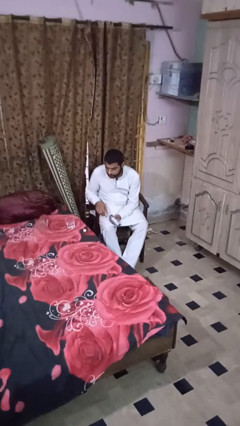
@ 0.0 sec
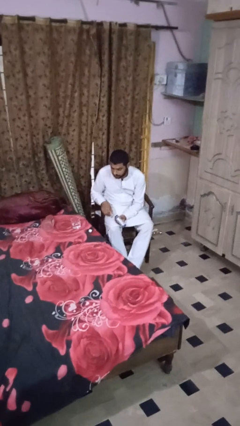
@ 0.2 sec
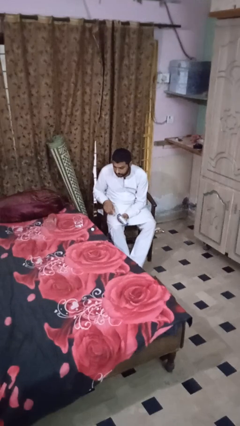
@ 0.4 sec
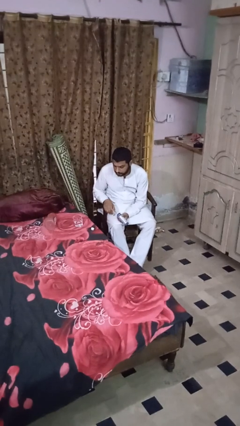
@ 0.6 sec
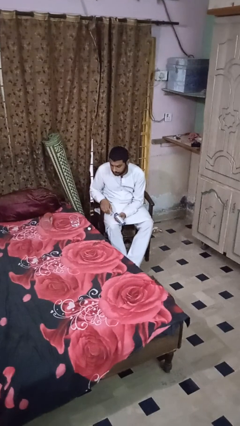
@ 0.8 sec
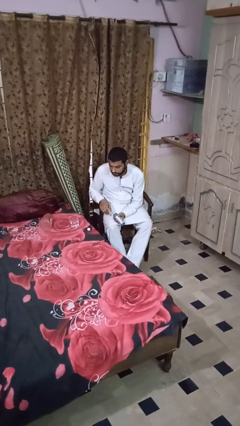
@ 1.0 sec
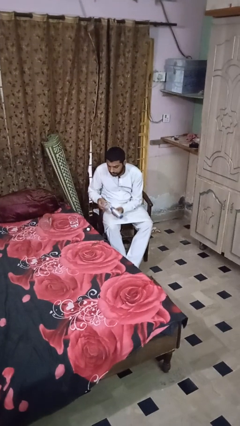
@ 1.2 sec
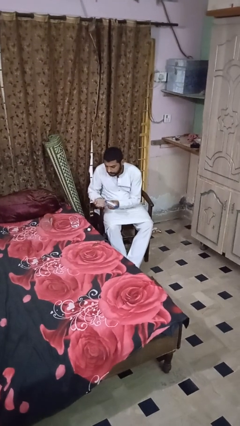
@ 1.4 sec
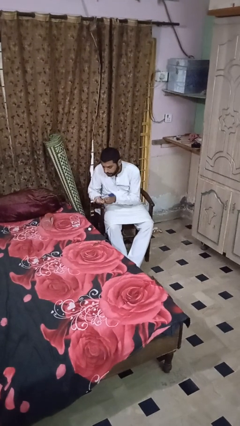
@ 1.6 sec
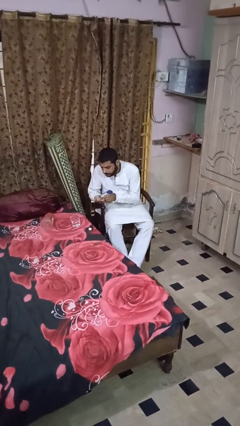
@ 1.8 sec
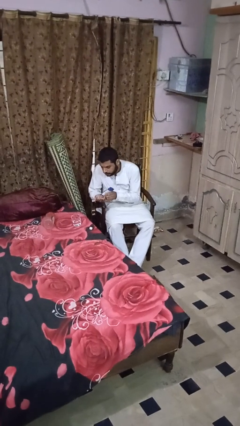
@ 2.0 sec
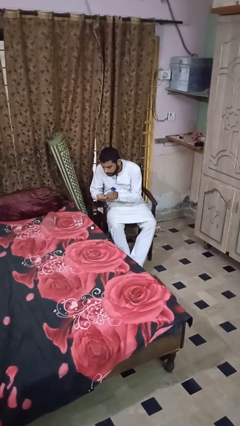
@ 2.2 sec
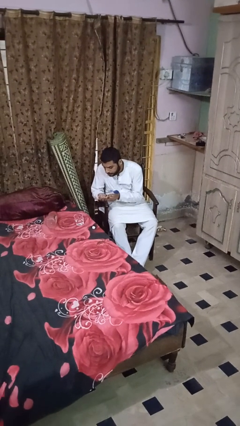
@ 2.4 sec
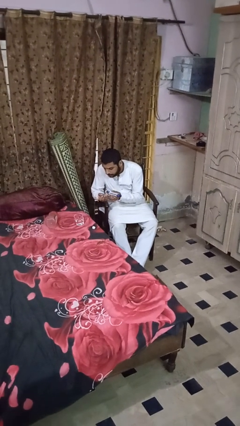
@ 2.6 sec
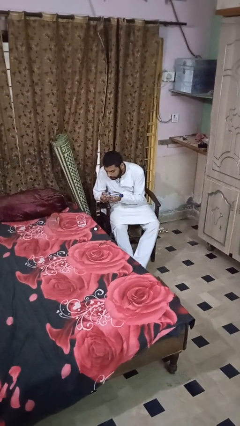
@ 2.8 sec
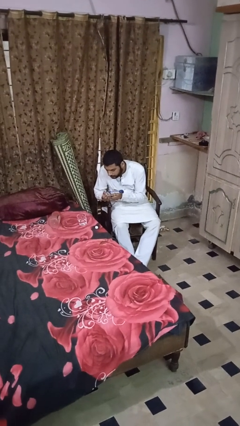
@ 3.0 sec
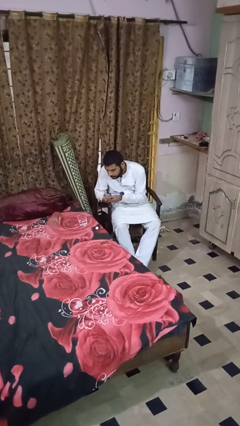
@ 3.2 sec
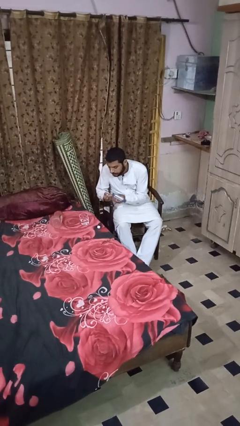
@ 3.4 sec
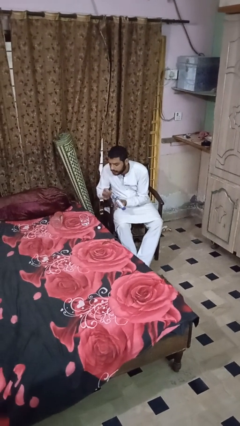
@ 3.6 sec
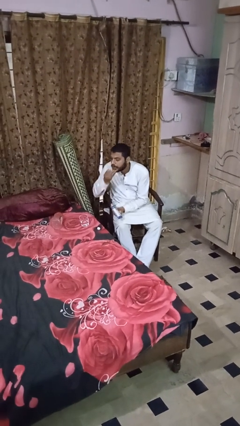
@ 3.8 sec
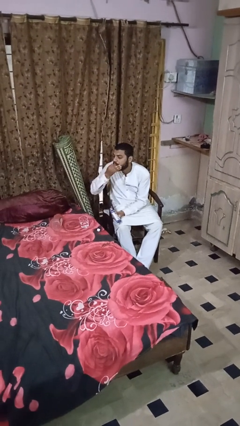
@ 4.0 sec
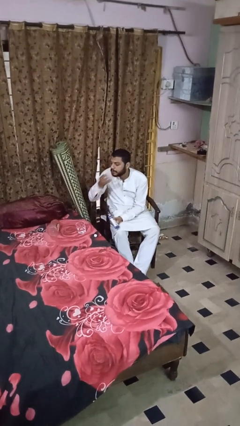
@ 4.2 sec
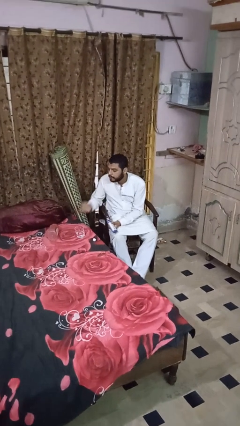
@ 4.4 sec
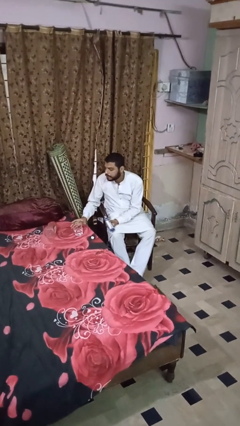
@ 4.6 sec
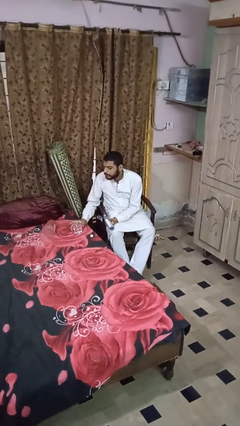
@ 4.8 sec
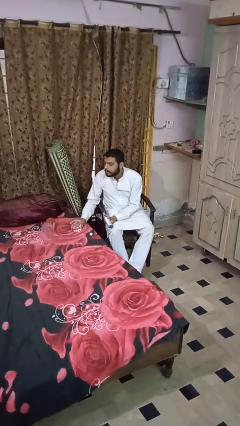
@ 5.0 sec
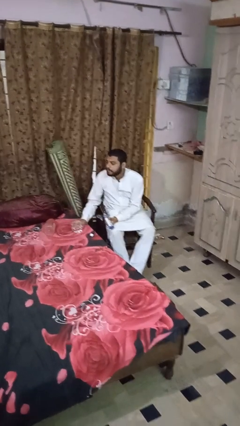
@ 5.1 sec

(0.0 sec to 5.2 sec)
person takes medicine pills

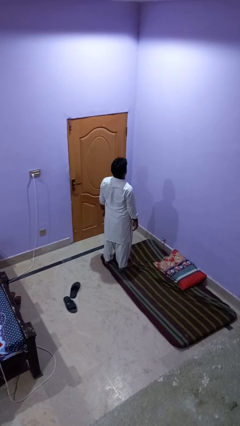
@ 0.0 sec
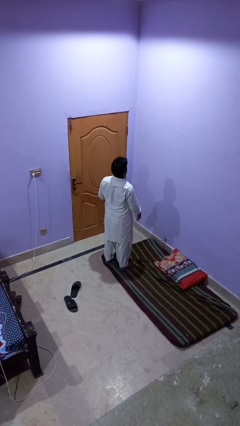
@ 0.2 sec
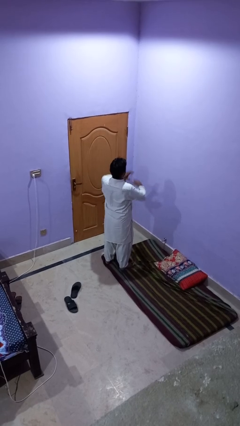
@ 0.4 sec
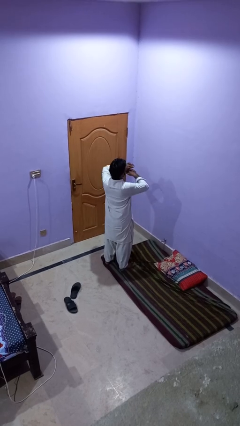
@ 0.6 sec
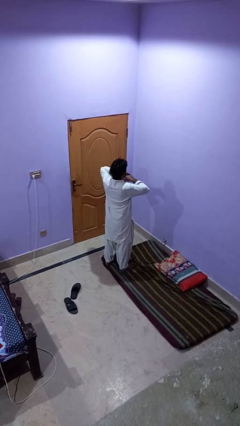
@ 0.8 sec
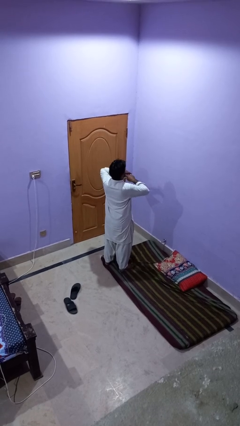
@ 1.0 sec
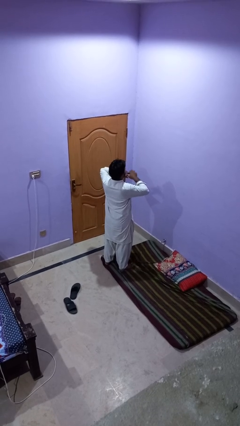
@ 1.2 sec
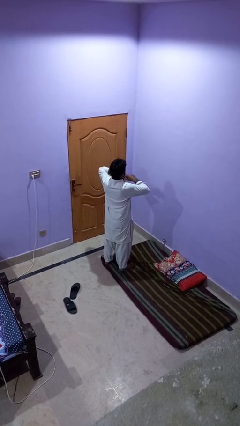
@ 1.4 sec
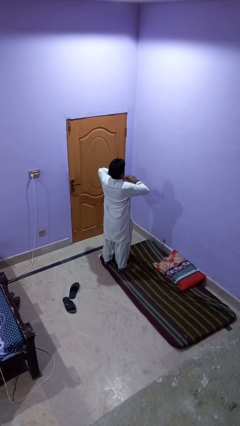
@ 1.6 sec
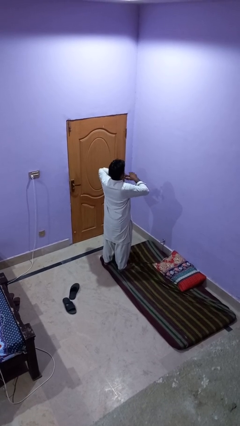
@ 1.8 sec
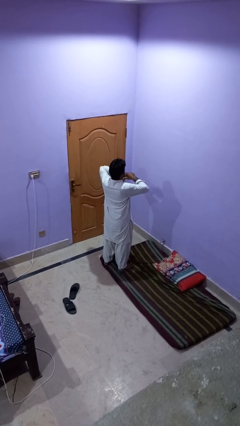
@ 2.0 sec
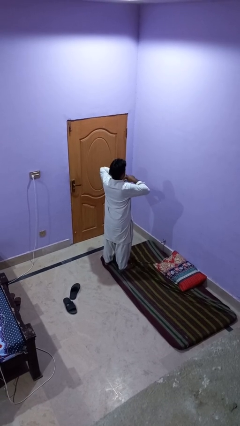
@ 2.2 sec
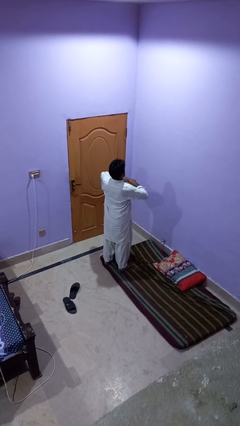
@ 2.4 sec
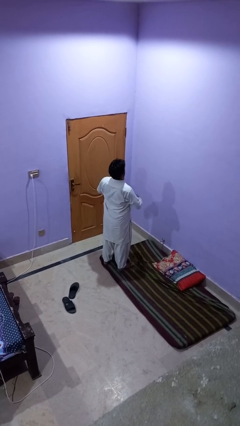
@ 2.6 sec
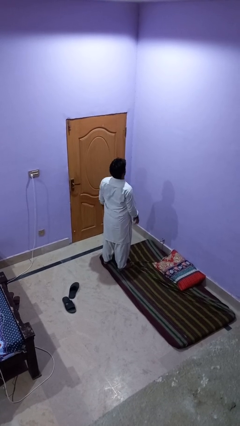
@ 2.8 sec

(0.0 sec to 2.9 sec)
person snaps fingers

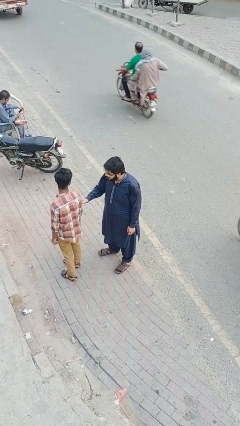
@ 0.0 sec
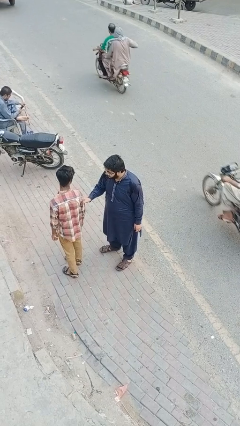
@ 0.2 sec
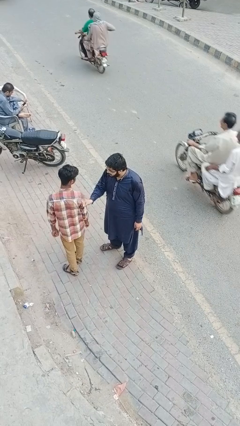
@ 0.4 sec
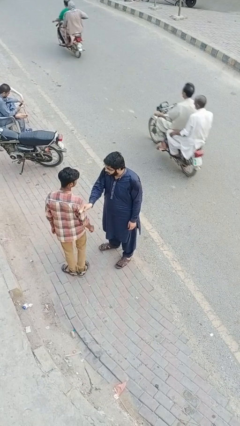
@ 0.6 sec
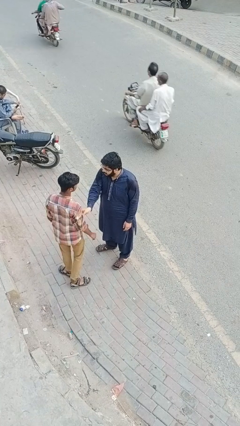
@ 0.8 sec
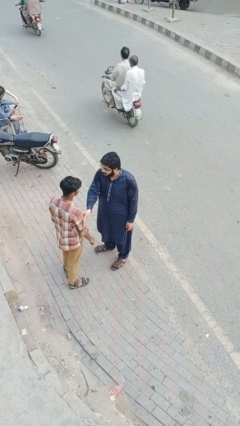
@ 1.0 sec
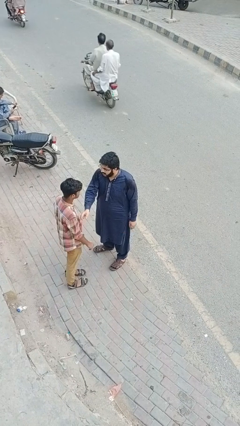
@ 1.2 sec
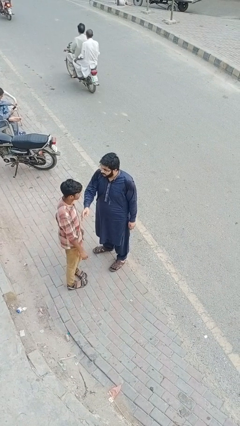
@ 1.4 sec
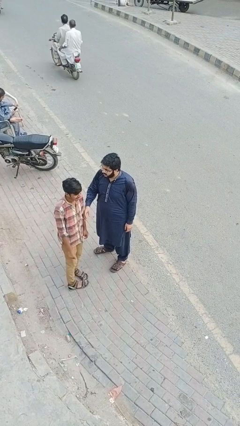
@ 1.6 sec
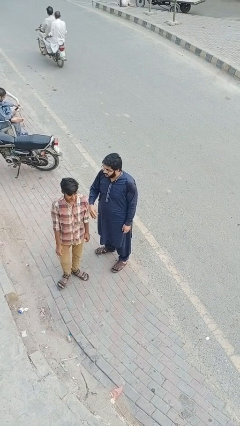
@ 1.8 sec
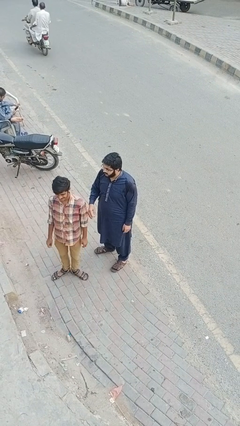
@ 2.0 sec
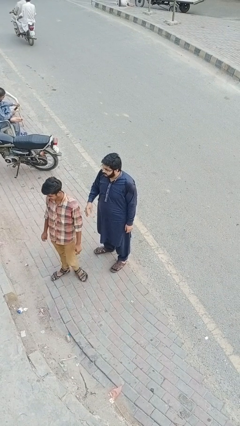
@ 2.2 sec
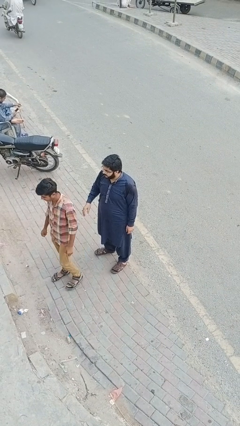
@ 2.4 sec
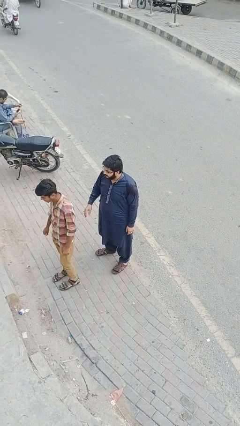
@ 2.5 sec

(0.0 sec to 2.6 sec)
person spins person around

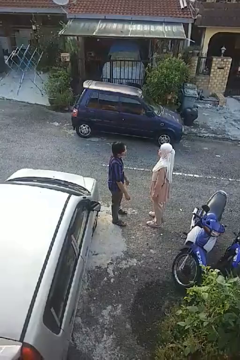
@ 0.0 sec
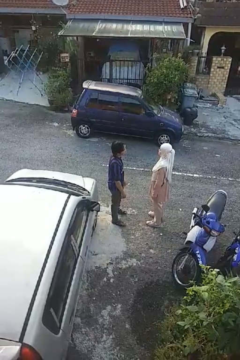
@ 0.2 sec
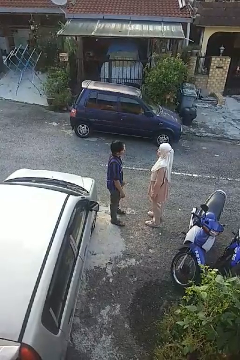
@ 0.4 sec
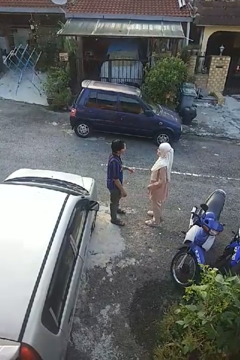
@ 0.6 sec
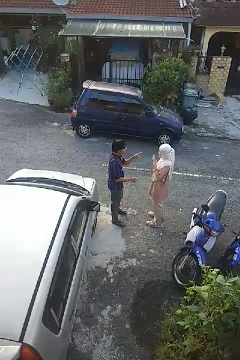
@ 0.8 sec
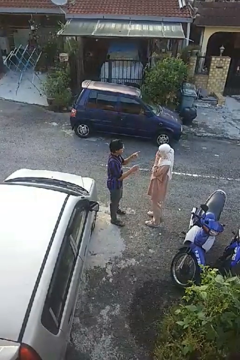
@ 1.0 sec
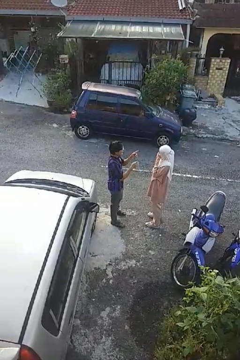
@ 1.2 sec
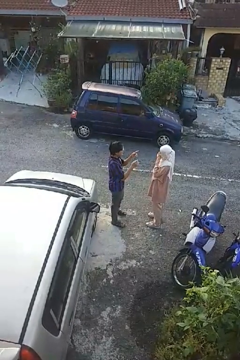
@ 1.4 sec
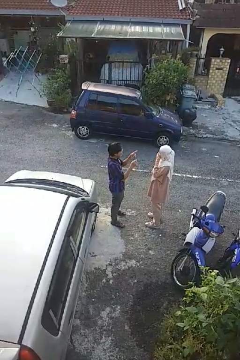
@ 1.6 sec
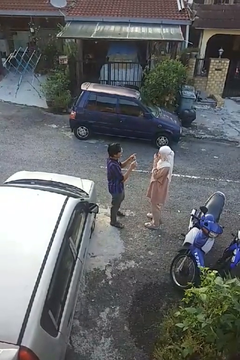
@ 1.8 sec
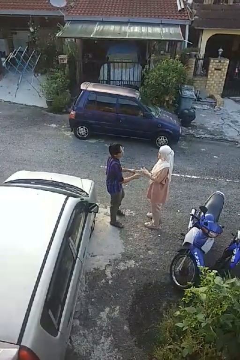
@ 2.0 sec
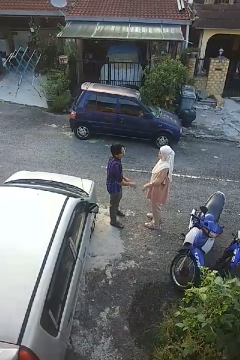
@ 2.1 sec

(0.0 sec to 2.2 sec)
person laughs with person

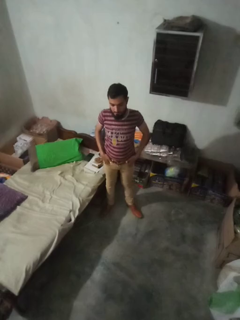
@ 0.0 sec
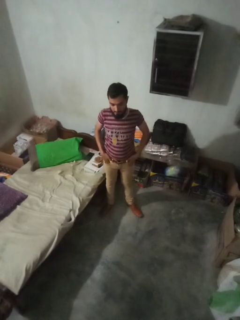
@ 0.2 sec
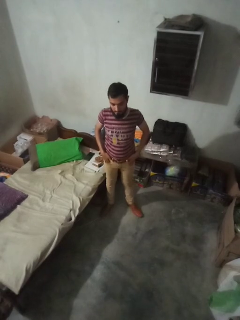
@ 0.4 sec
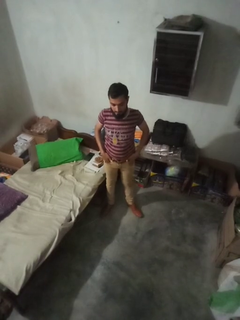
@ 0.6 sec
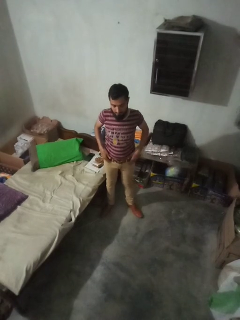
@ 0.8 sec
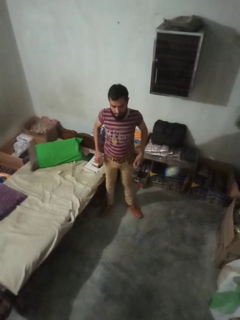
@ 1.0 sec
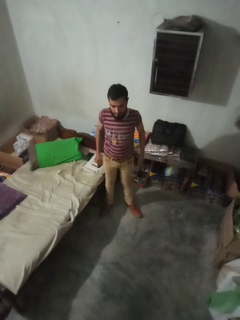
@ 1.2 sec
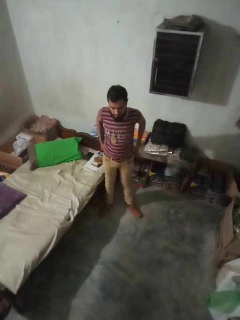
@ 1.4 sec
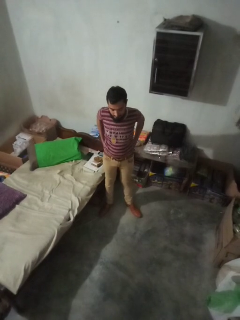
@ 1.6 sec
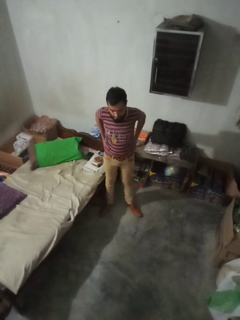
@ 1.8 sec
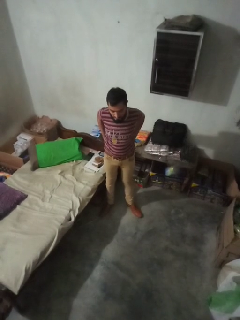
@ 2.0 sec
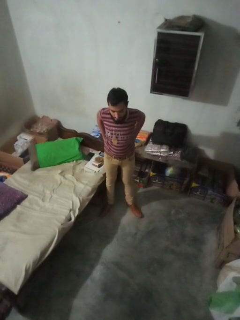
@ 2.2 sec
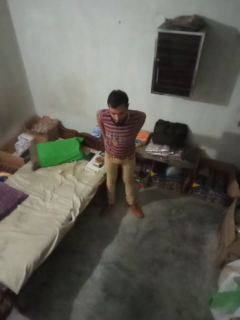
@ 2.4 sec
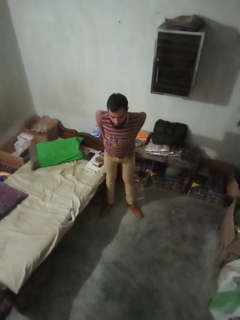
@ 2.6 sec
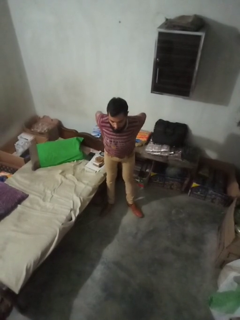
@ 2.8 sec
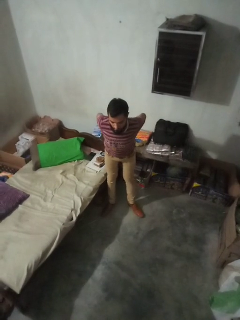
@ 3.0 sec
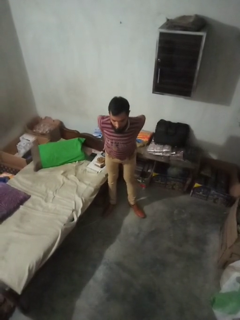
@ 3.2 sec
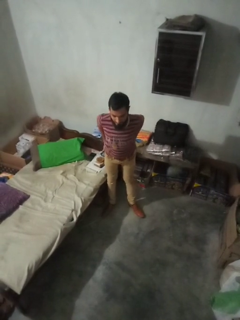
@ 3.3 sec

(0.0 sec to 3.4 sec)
person puts hands in back pockets

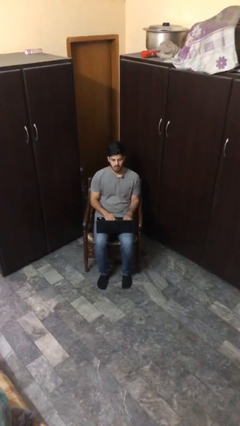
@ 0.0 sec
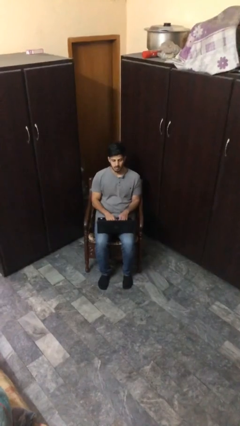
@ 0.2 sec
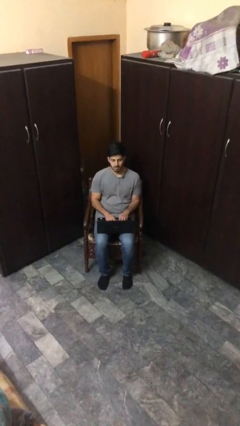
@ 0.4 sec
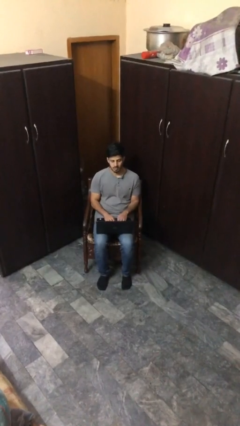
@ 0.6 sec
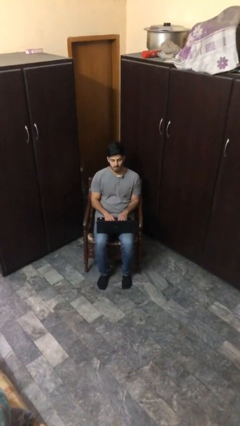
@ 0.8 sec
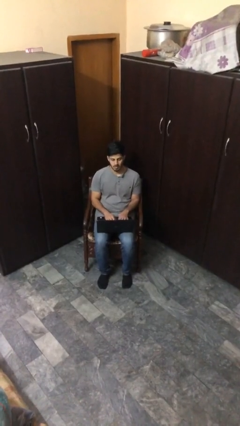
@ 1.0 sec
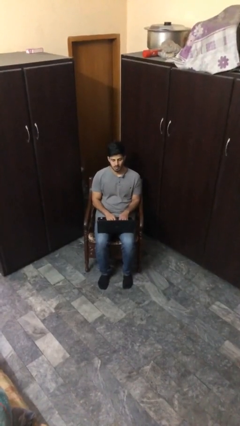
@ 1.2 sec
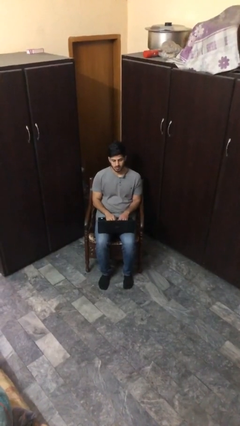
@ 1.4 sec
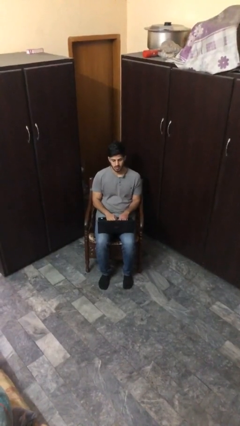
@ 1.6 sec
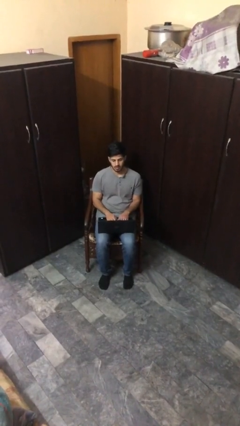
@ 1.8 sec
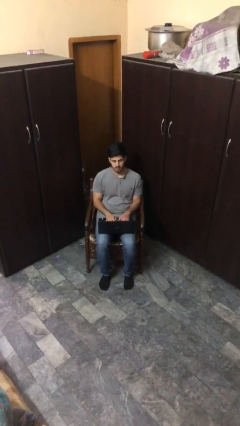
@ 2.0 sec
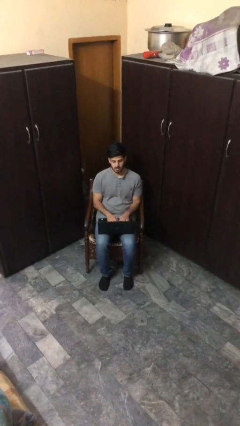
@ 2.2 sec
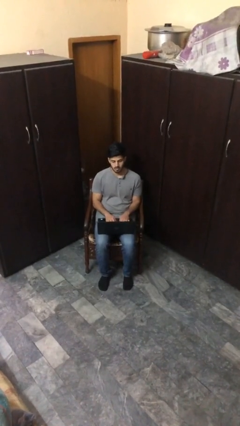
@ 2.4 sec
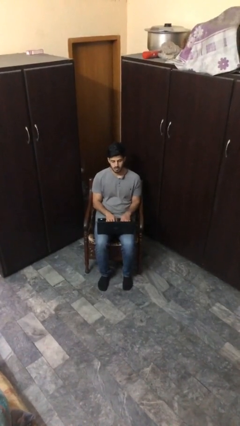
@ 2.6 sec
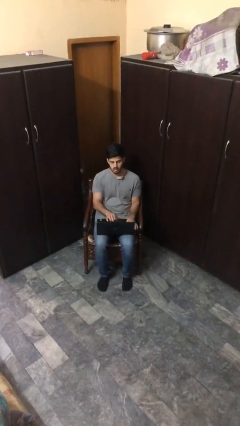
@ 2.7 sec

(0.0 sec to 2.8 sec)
person interacts with laptop
